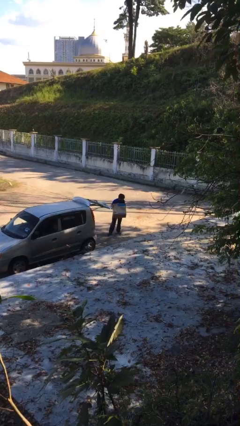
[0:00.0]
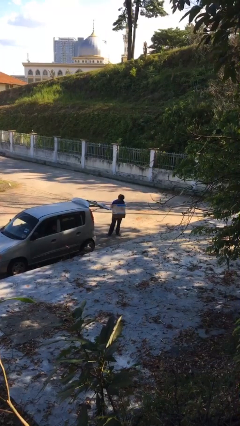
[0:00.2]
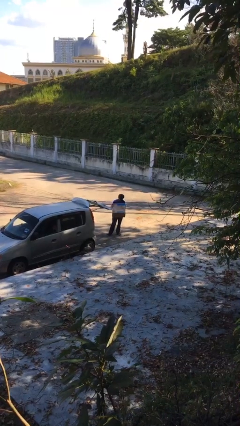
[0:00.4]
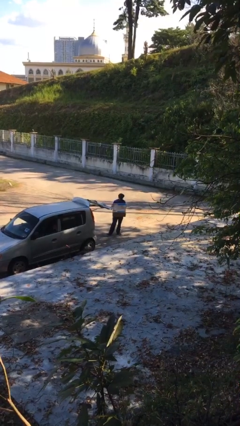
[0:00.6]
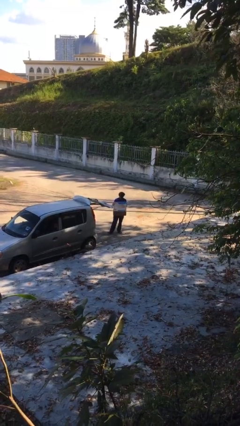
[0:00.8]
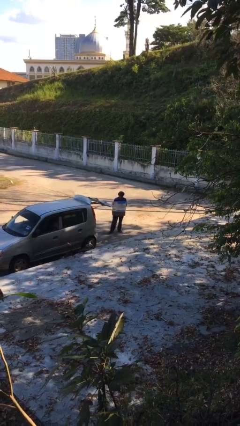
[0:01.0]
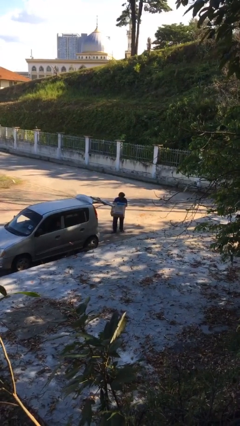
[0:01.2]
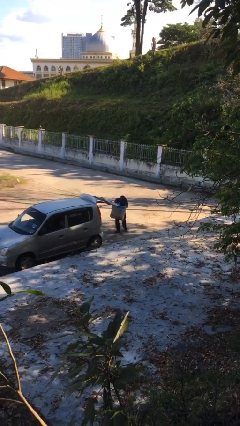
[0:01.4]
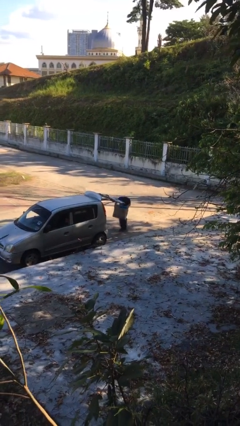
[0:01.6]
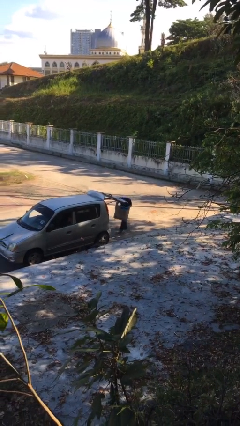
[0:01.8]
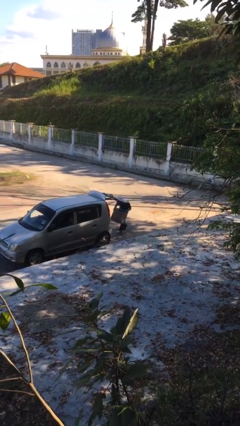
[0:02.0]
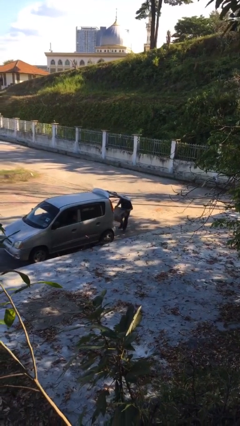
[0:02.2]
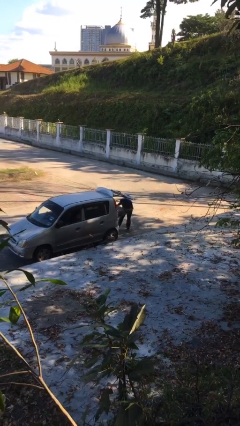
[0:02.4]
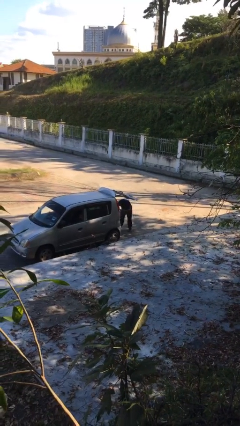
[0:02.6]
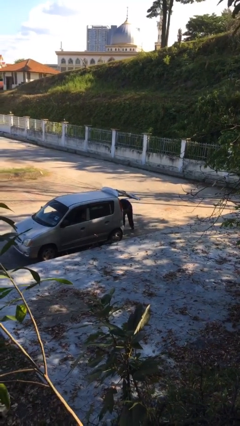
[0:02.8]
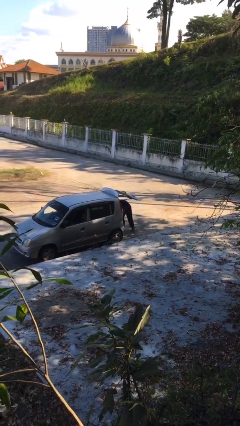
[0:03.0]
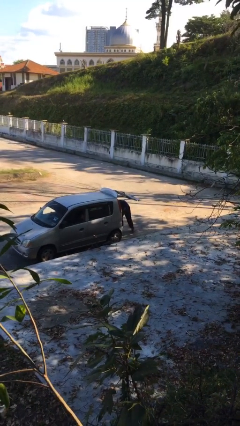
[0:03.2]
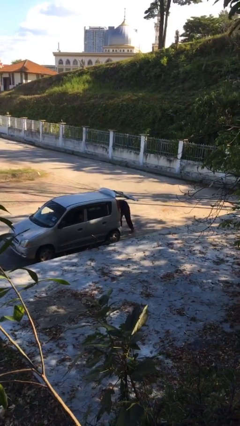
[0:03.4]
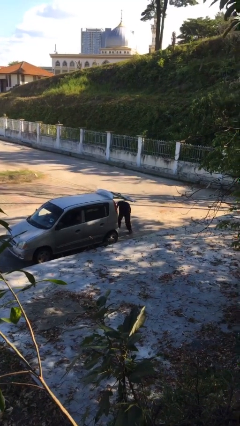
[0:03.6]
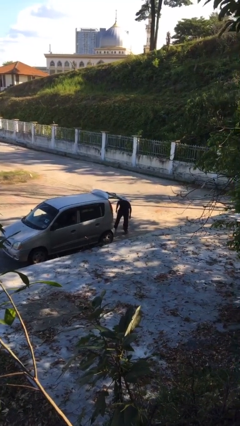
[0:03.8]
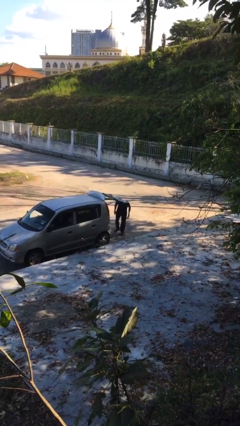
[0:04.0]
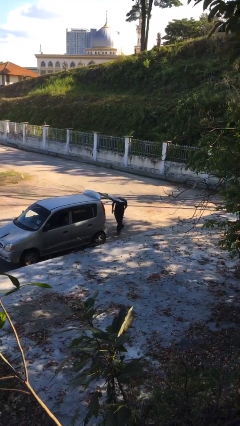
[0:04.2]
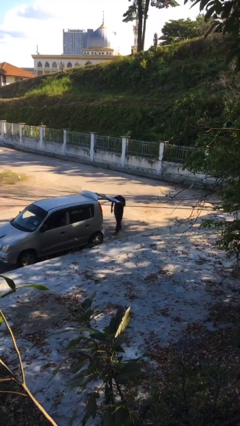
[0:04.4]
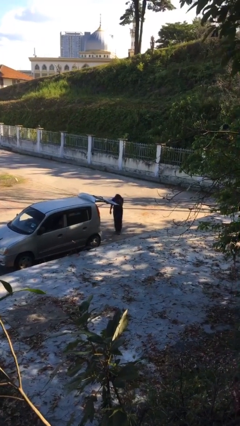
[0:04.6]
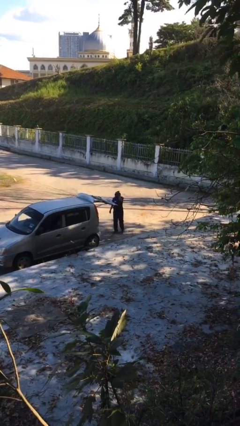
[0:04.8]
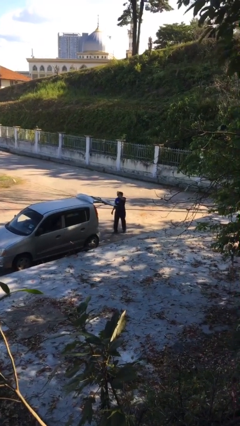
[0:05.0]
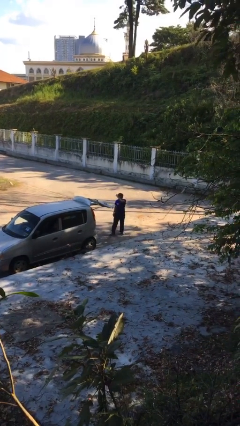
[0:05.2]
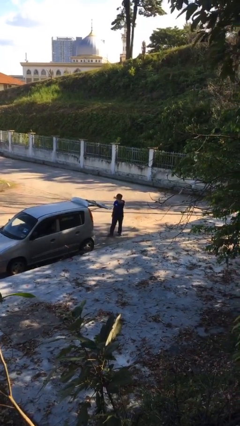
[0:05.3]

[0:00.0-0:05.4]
person loads car

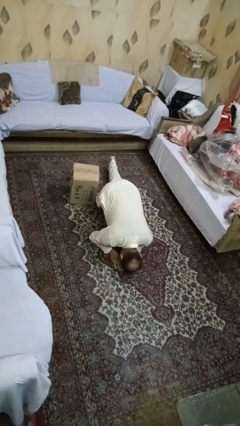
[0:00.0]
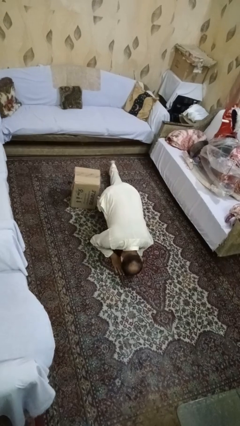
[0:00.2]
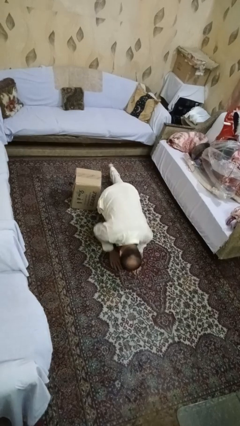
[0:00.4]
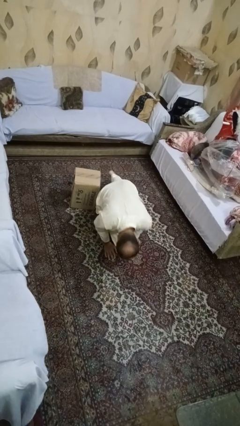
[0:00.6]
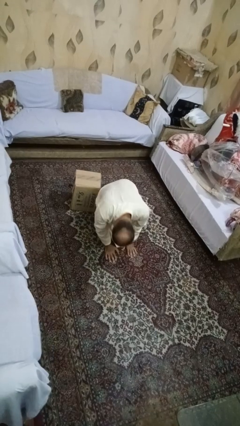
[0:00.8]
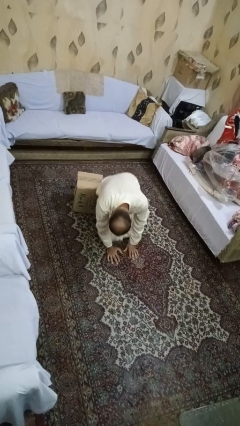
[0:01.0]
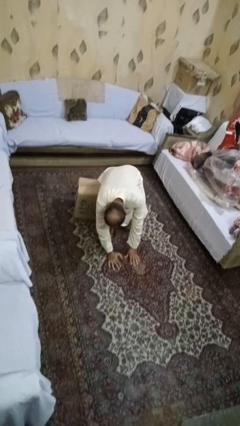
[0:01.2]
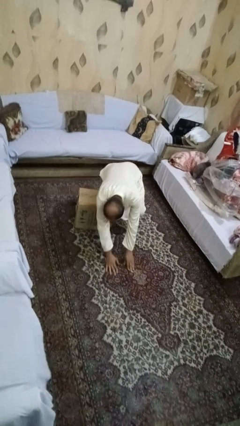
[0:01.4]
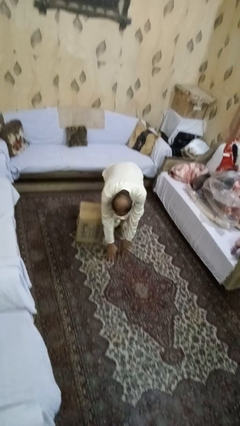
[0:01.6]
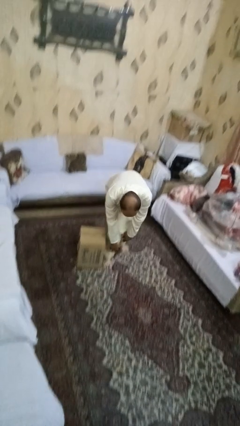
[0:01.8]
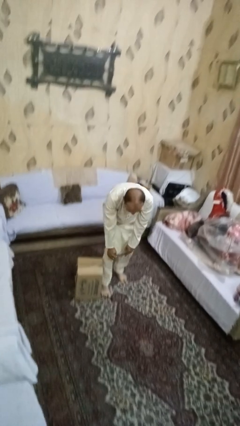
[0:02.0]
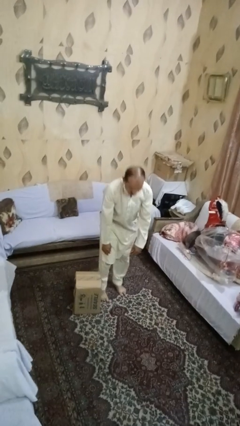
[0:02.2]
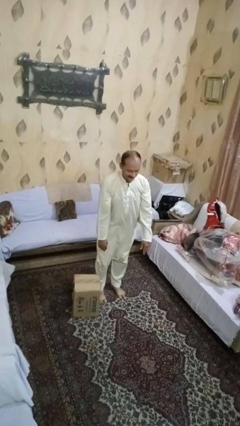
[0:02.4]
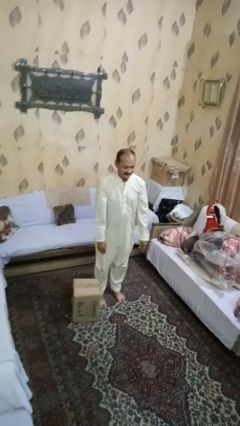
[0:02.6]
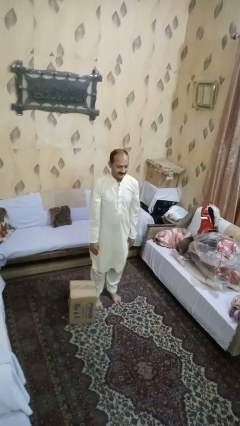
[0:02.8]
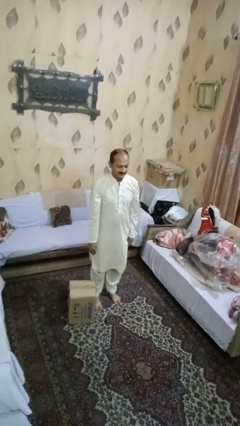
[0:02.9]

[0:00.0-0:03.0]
person stands up from floor

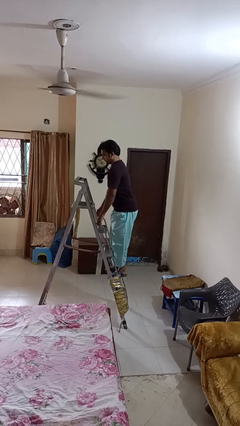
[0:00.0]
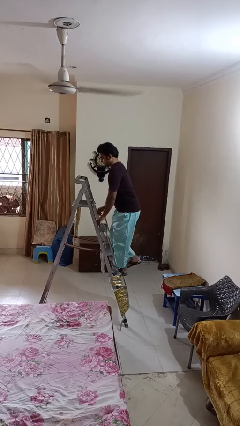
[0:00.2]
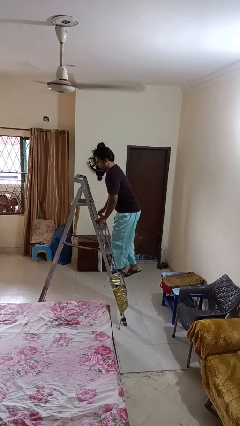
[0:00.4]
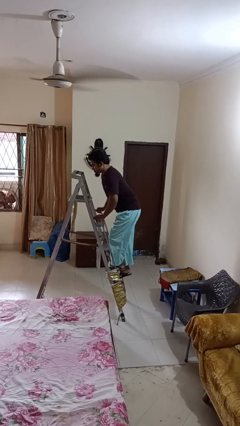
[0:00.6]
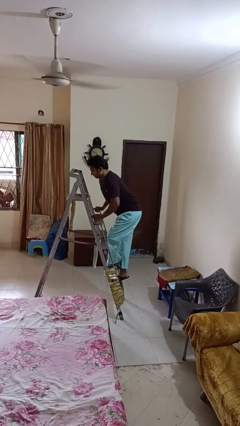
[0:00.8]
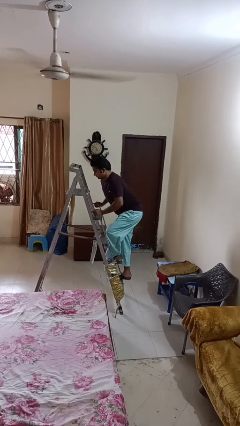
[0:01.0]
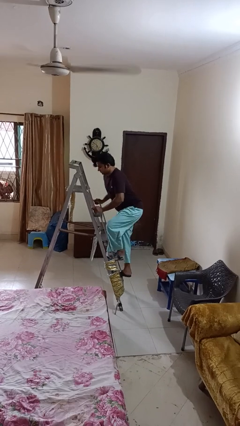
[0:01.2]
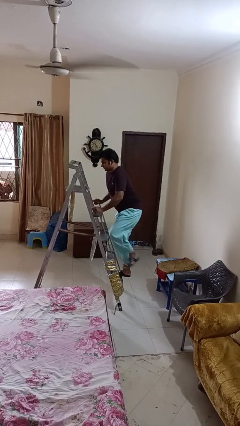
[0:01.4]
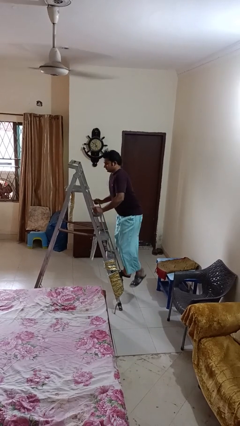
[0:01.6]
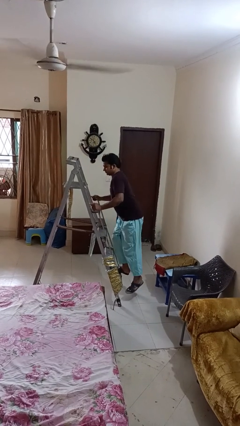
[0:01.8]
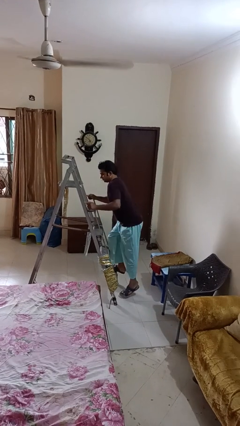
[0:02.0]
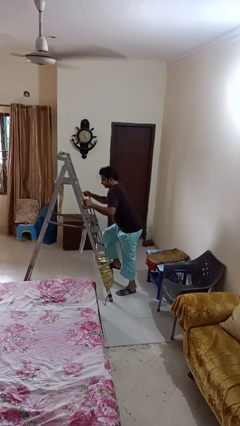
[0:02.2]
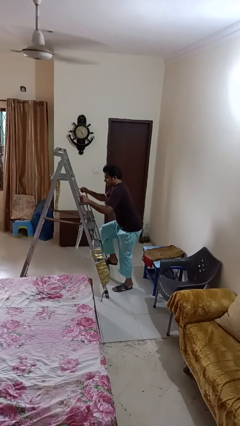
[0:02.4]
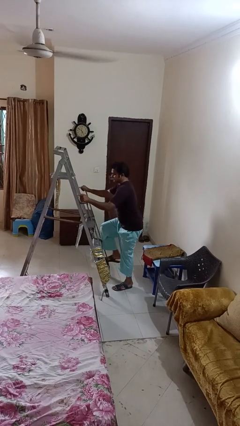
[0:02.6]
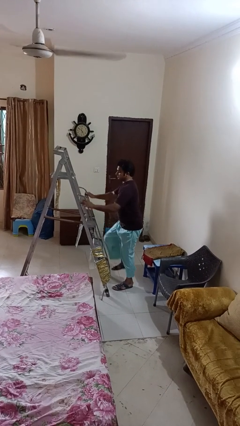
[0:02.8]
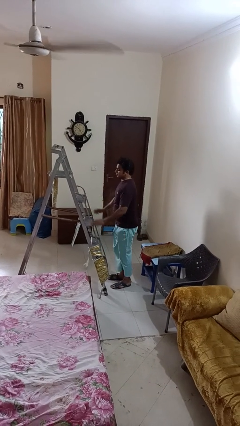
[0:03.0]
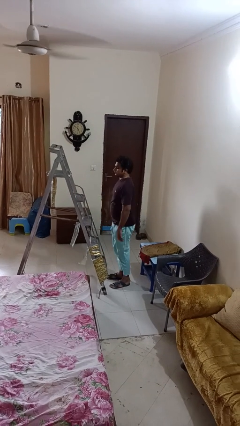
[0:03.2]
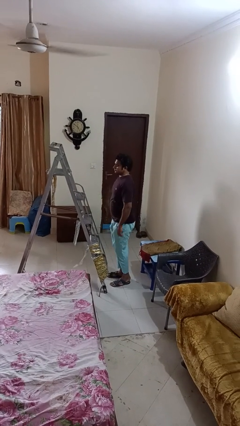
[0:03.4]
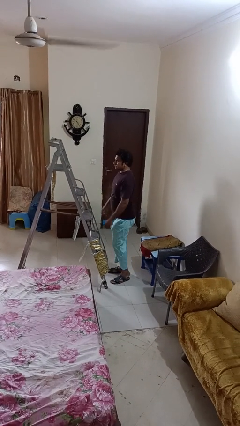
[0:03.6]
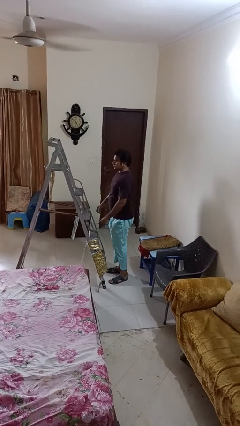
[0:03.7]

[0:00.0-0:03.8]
person climbs down ladder

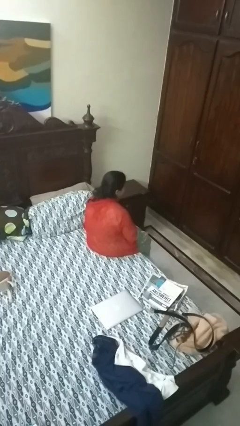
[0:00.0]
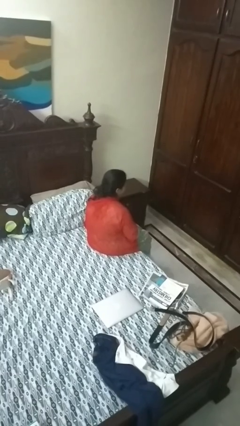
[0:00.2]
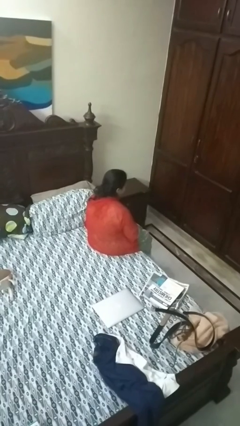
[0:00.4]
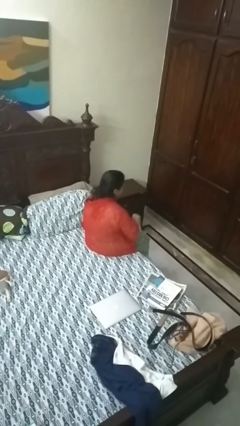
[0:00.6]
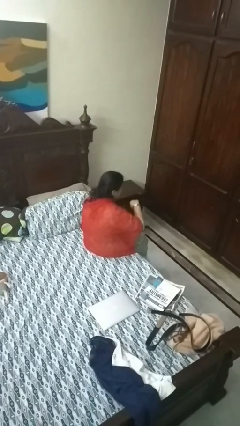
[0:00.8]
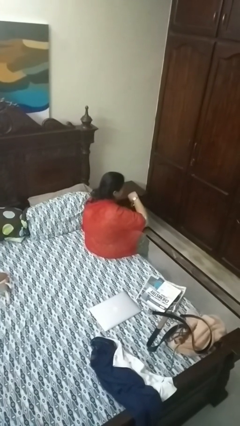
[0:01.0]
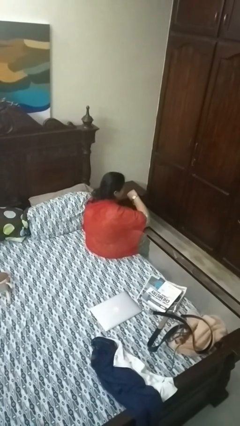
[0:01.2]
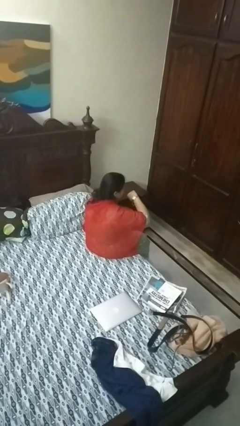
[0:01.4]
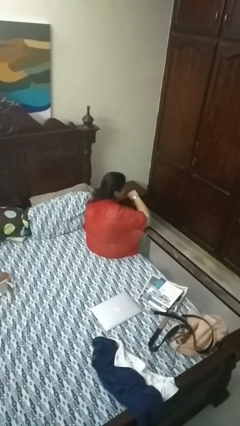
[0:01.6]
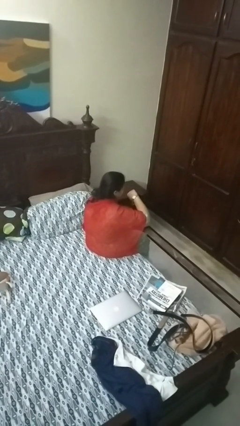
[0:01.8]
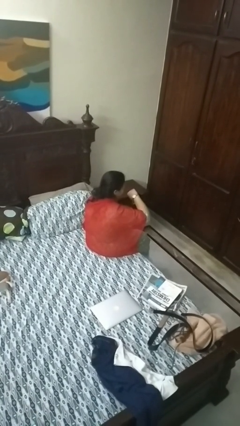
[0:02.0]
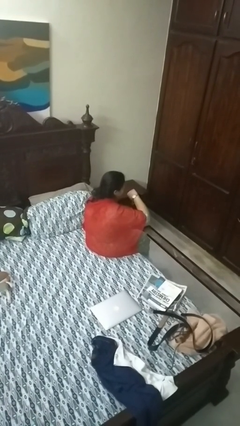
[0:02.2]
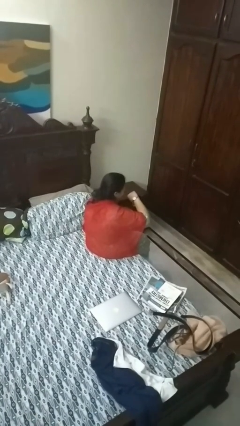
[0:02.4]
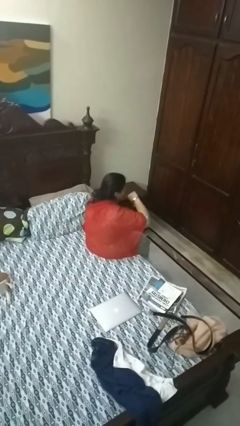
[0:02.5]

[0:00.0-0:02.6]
person looks at wristwatch

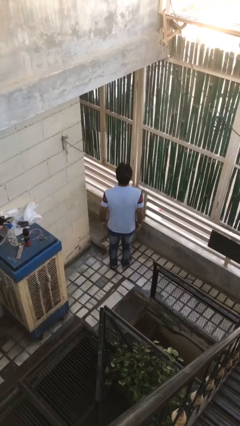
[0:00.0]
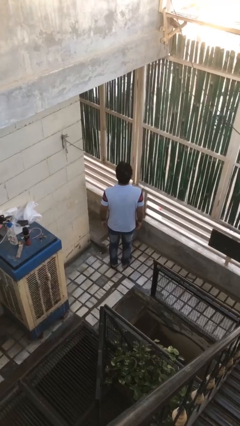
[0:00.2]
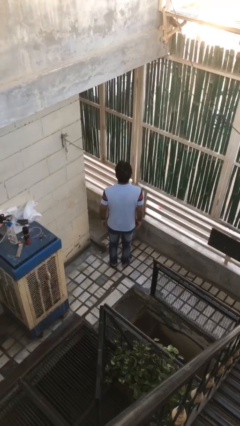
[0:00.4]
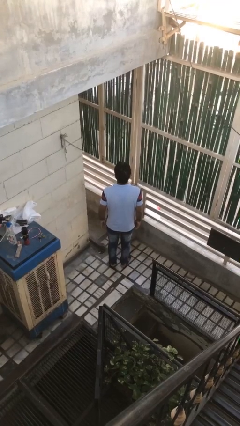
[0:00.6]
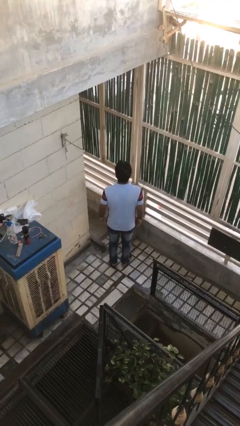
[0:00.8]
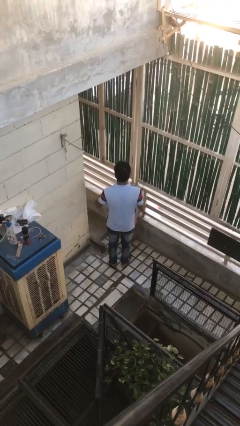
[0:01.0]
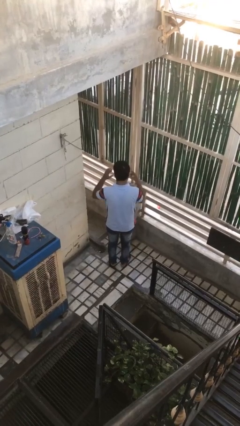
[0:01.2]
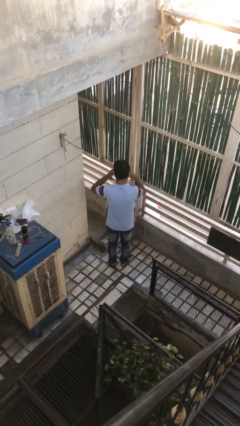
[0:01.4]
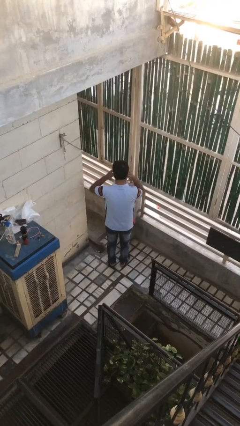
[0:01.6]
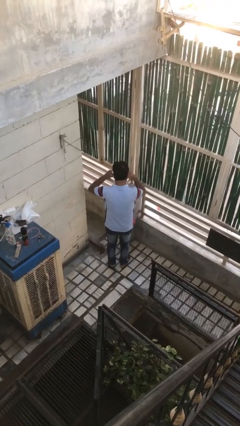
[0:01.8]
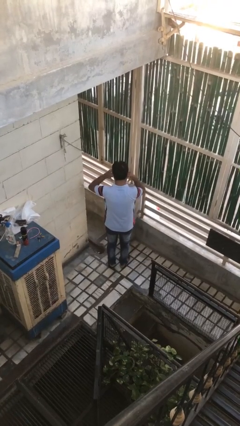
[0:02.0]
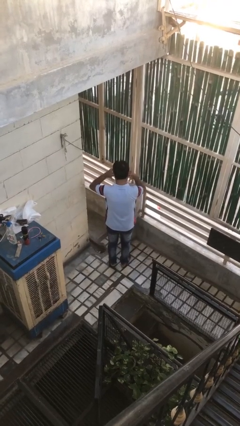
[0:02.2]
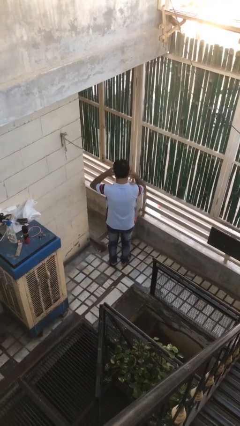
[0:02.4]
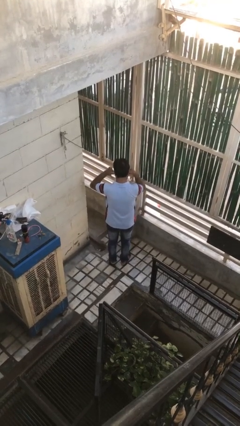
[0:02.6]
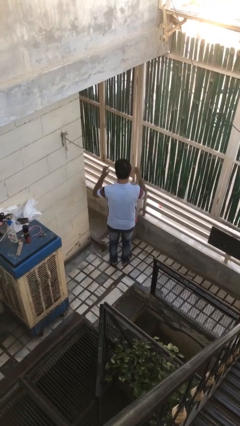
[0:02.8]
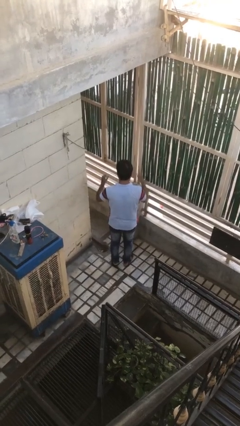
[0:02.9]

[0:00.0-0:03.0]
person puts fingers in ear
